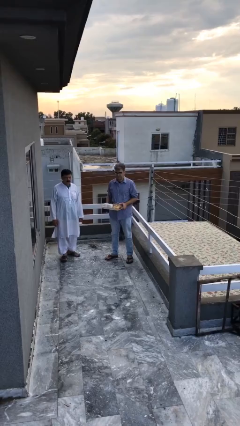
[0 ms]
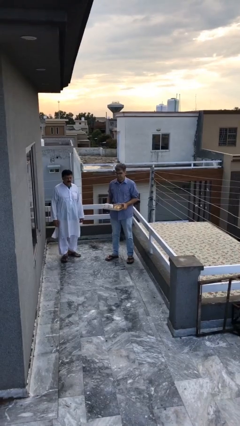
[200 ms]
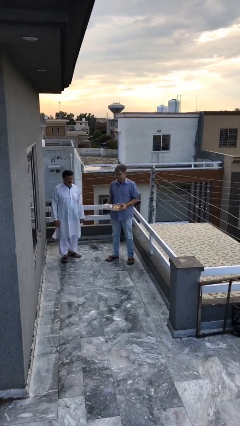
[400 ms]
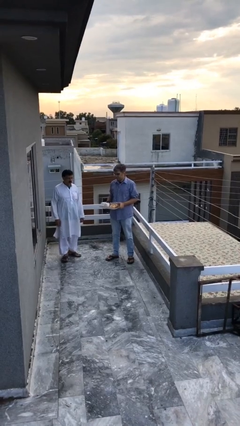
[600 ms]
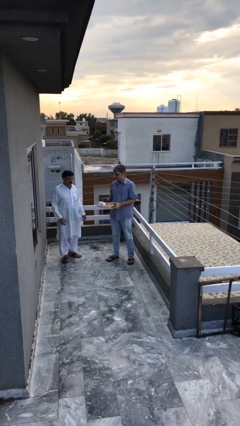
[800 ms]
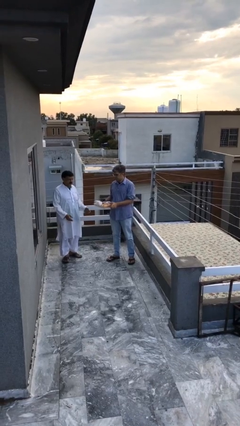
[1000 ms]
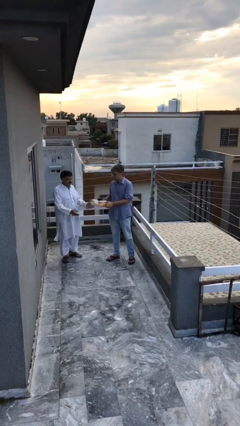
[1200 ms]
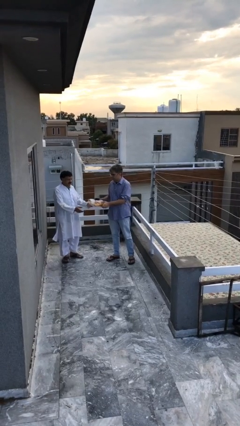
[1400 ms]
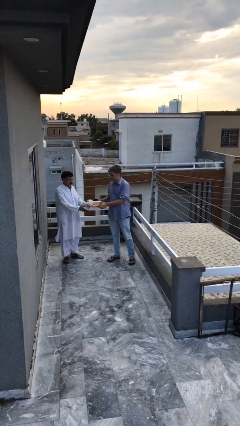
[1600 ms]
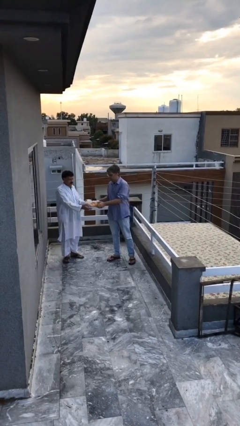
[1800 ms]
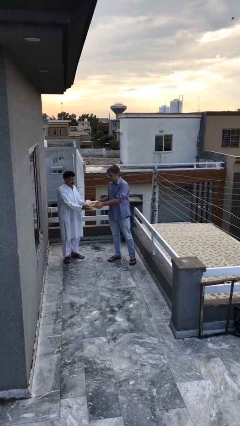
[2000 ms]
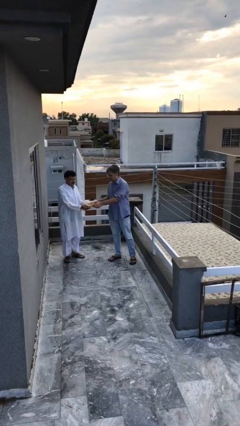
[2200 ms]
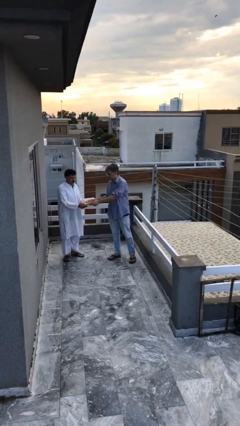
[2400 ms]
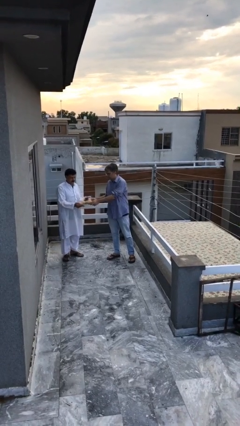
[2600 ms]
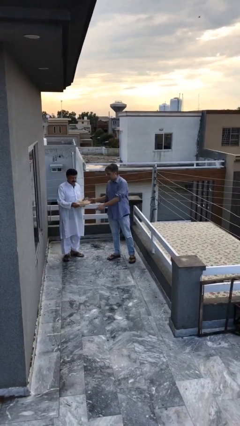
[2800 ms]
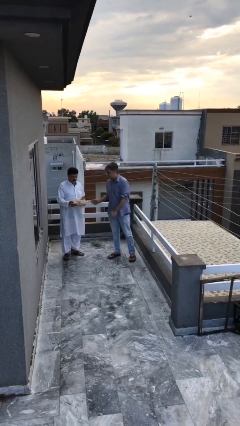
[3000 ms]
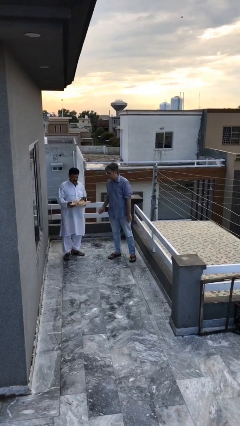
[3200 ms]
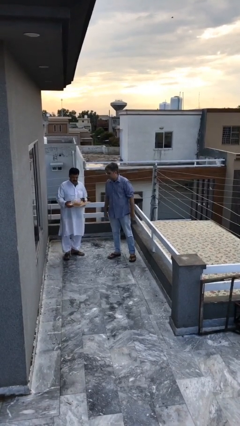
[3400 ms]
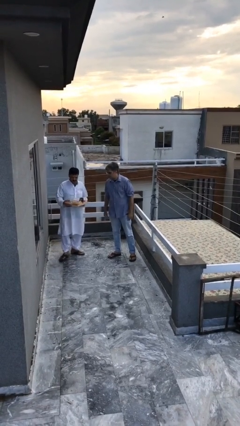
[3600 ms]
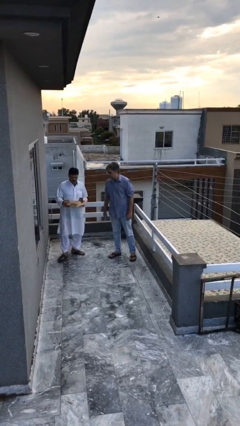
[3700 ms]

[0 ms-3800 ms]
person transfers object to person

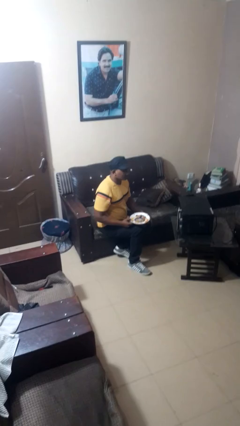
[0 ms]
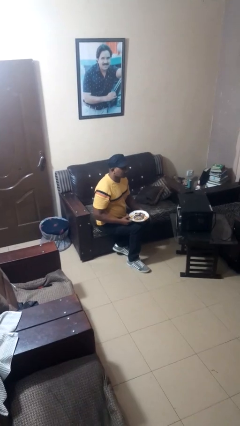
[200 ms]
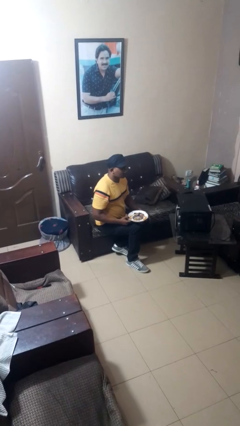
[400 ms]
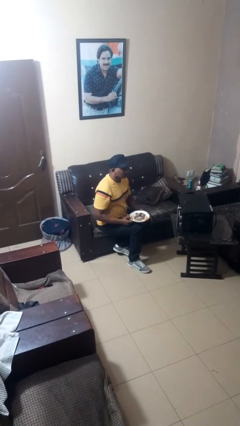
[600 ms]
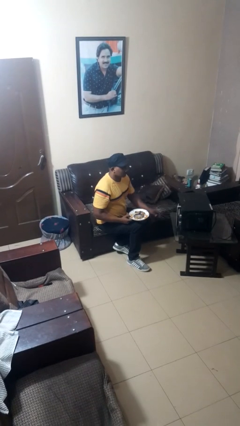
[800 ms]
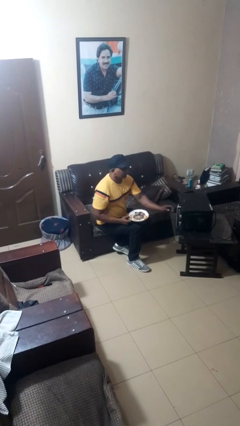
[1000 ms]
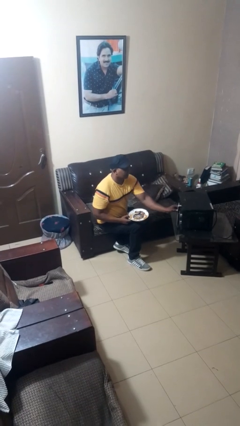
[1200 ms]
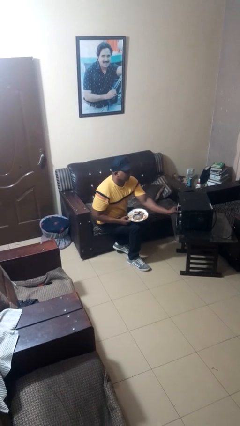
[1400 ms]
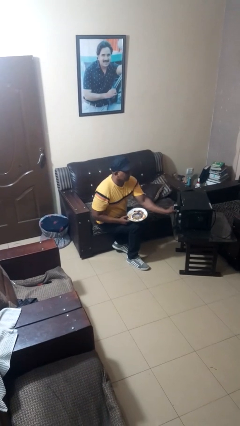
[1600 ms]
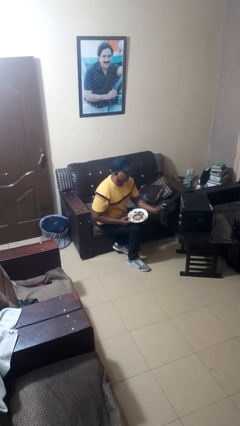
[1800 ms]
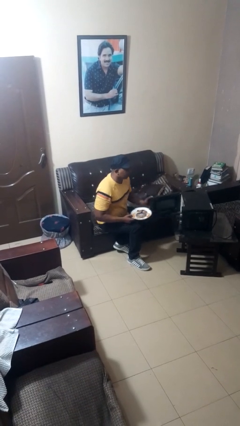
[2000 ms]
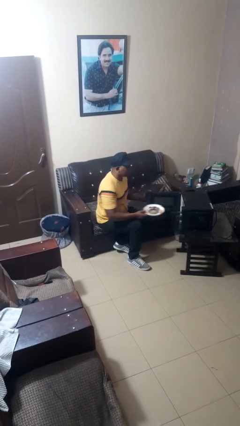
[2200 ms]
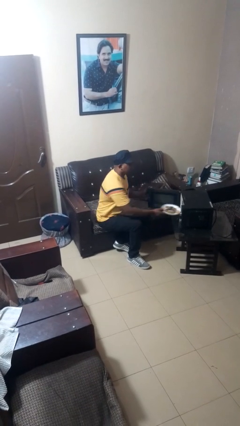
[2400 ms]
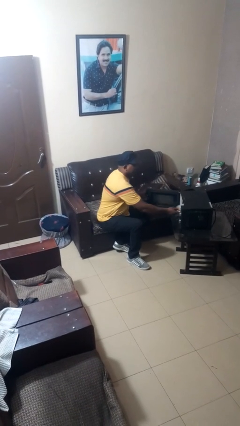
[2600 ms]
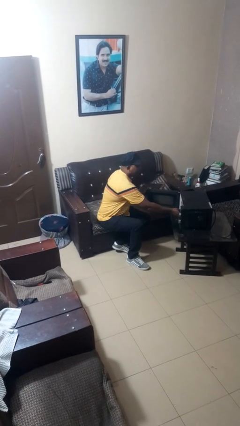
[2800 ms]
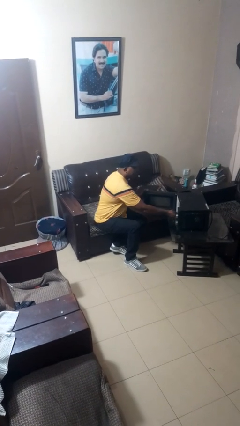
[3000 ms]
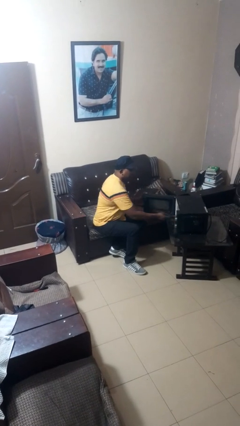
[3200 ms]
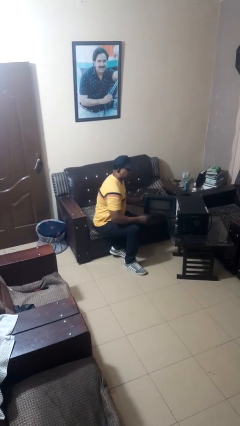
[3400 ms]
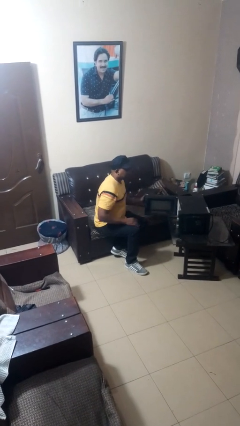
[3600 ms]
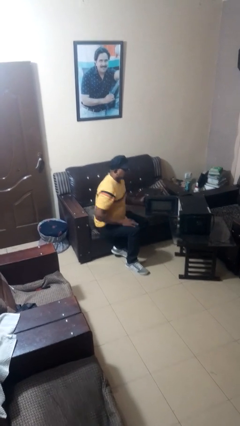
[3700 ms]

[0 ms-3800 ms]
person puts object into microwave

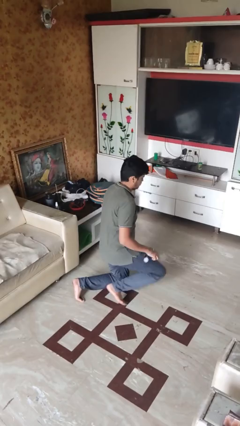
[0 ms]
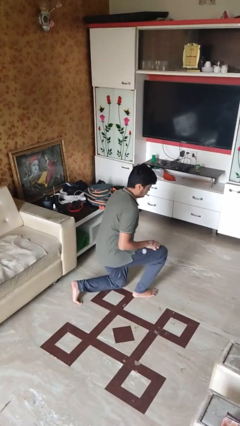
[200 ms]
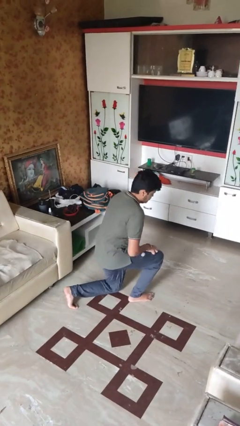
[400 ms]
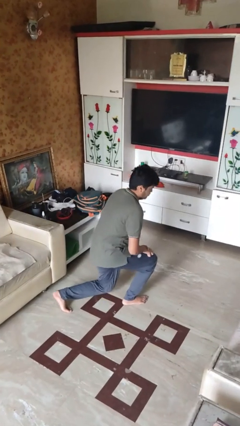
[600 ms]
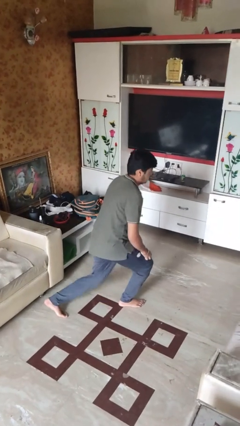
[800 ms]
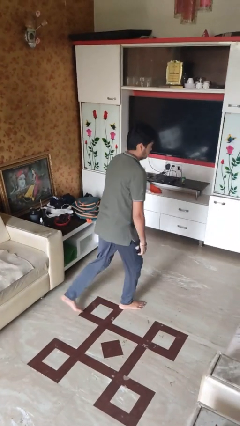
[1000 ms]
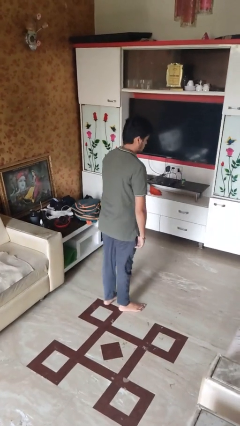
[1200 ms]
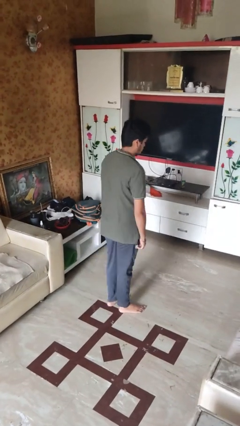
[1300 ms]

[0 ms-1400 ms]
person stands up from floor

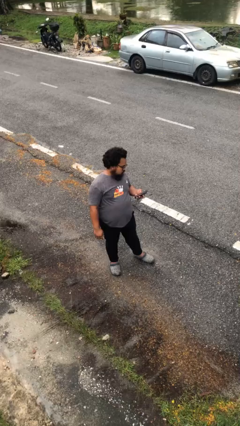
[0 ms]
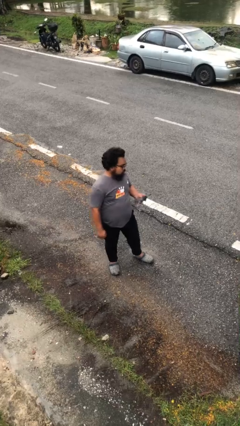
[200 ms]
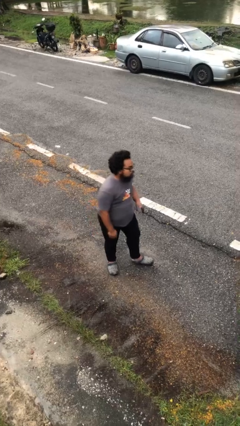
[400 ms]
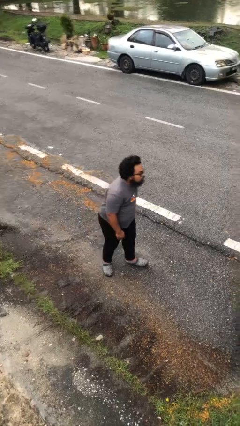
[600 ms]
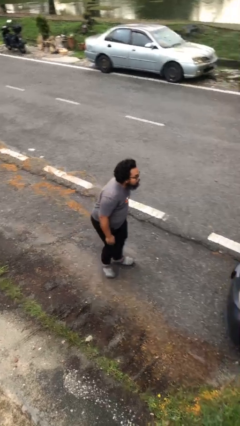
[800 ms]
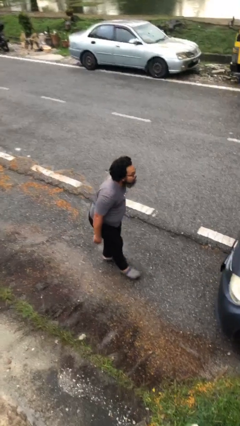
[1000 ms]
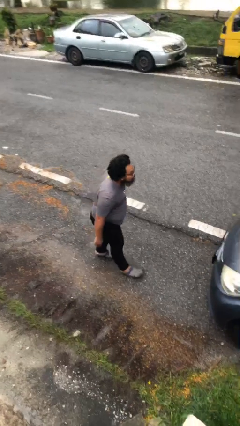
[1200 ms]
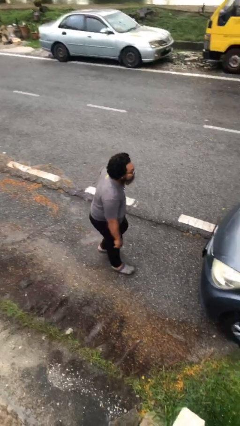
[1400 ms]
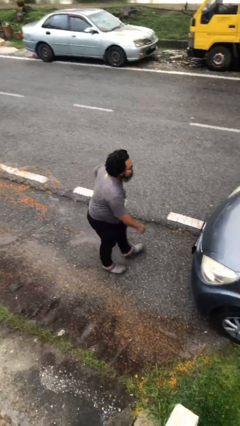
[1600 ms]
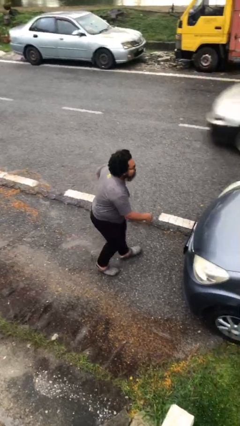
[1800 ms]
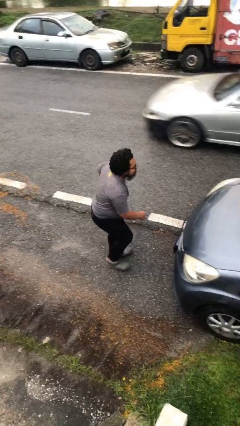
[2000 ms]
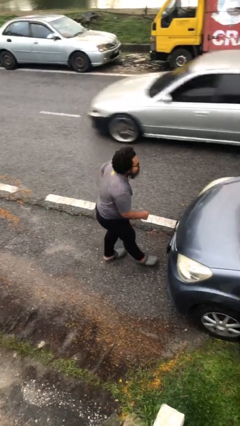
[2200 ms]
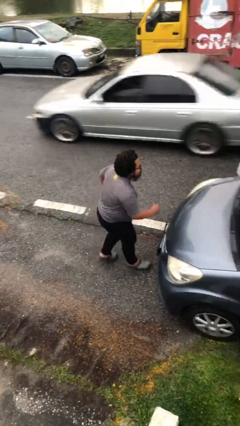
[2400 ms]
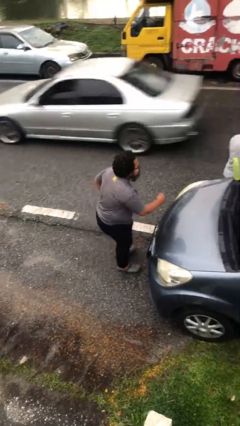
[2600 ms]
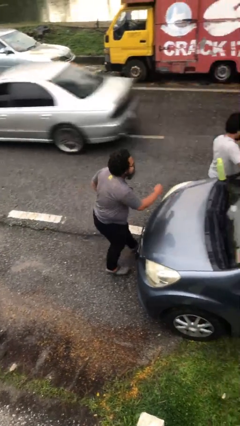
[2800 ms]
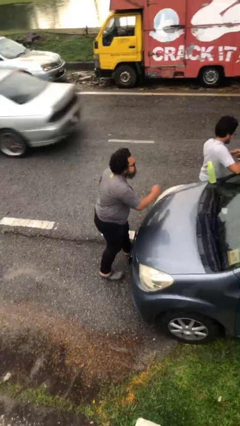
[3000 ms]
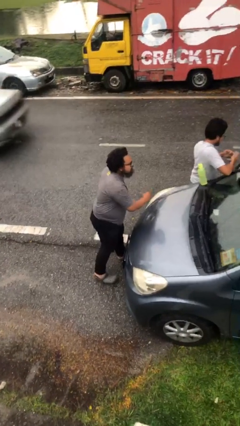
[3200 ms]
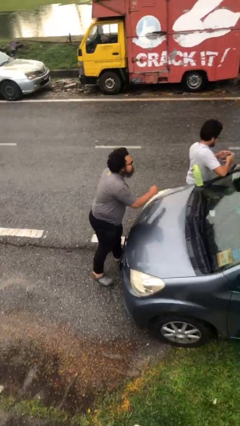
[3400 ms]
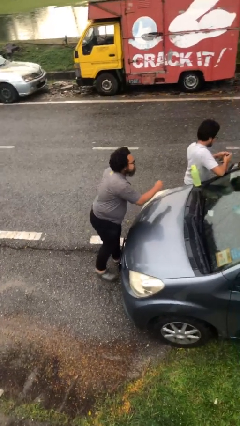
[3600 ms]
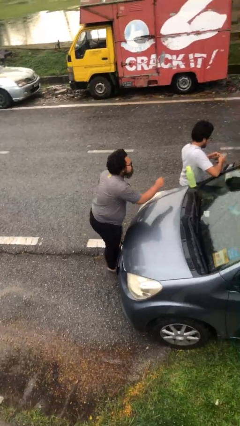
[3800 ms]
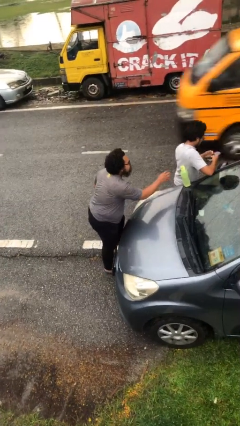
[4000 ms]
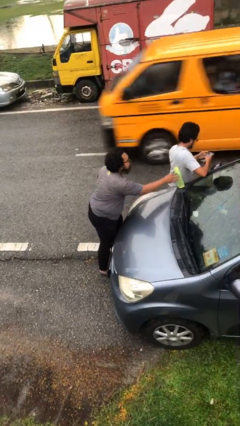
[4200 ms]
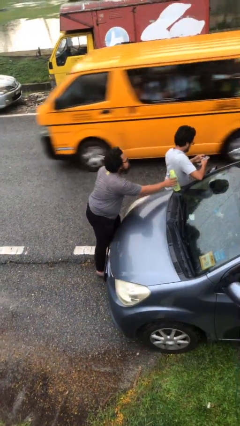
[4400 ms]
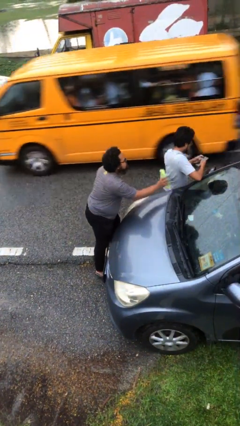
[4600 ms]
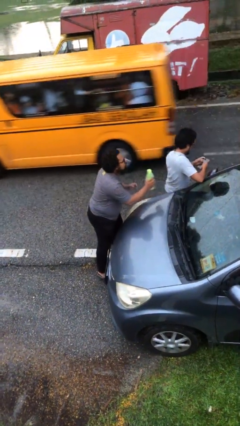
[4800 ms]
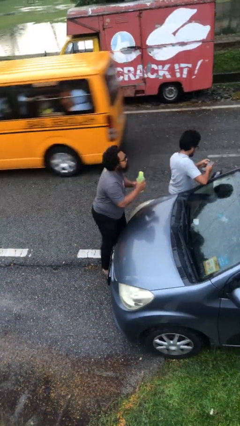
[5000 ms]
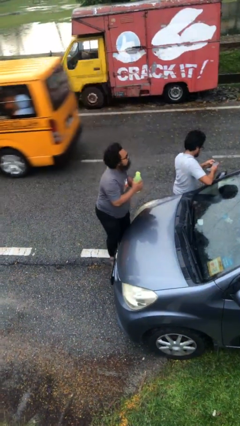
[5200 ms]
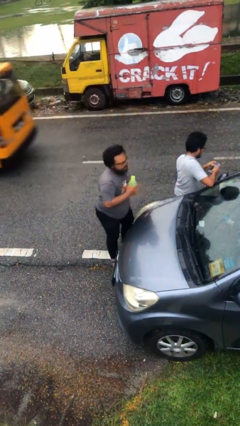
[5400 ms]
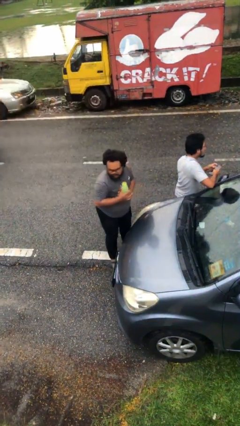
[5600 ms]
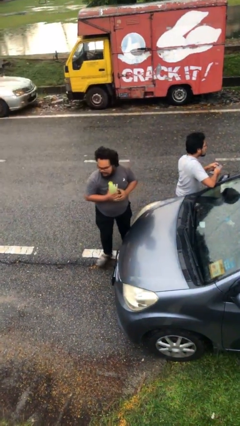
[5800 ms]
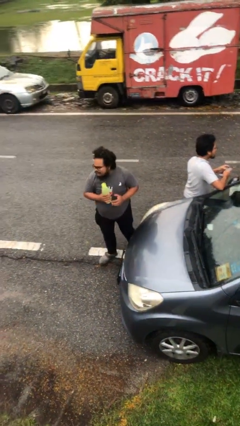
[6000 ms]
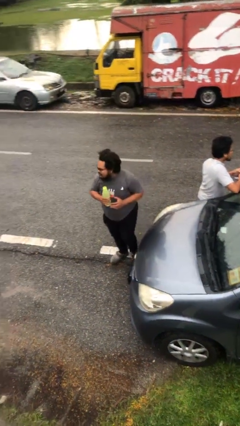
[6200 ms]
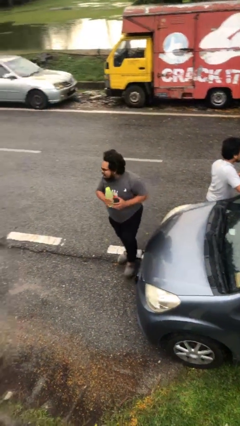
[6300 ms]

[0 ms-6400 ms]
person steals object from person

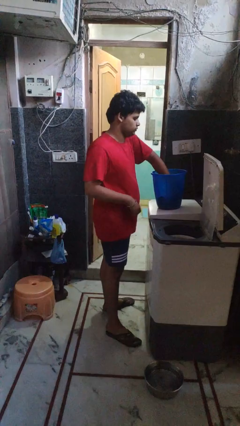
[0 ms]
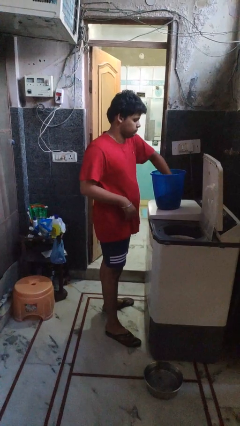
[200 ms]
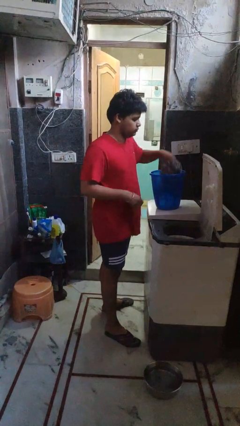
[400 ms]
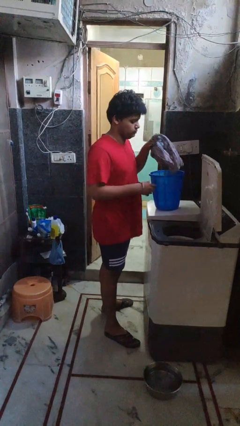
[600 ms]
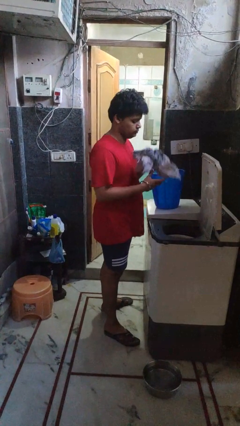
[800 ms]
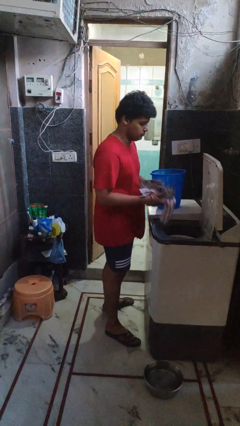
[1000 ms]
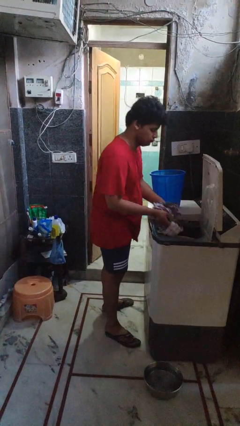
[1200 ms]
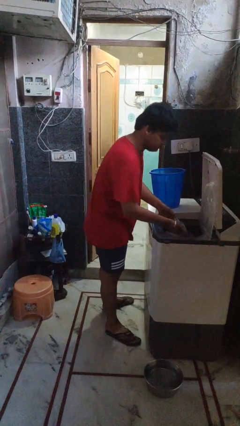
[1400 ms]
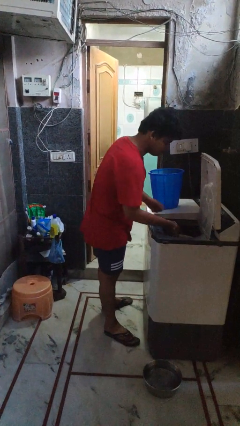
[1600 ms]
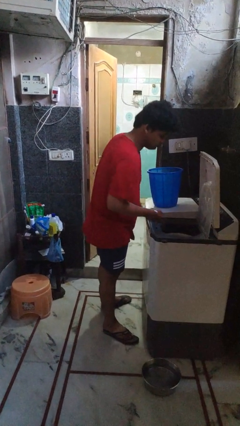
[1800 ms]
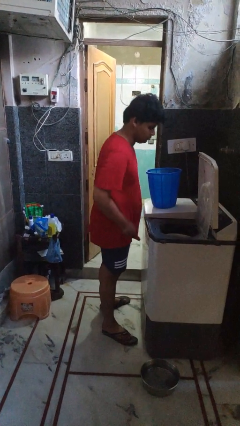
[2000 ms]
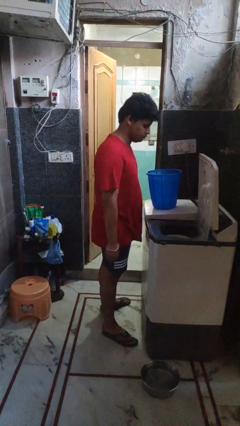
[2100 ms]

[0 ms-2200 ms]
person loads dryer

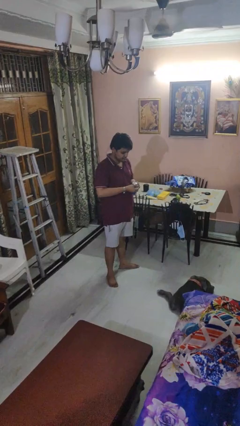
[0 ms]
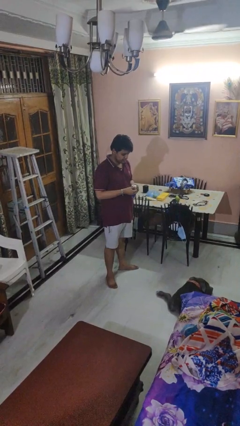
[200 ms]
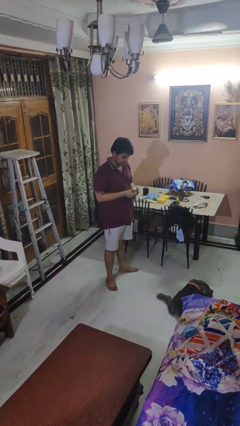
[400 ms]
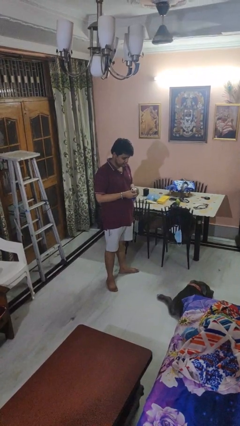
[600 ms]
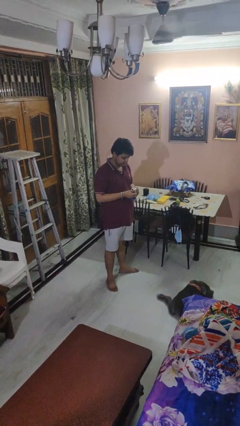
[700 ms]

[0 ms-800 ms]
person opens beverage can
